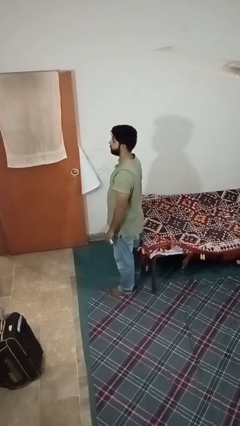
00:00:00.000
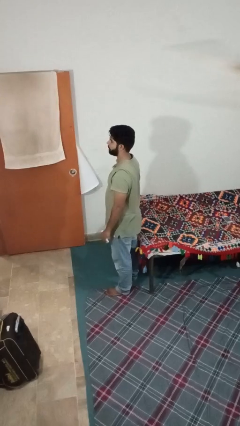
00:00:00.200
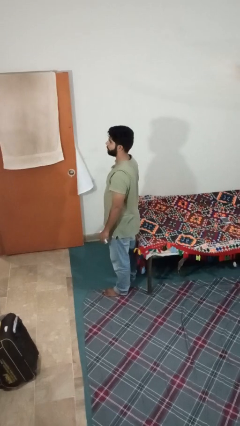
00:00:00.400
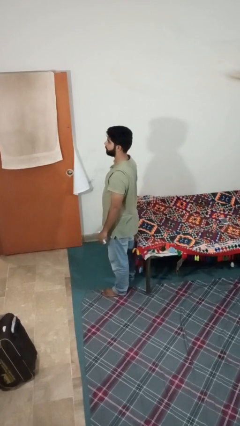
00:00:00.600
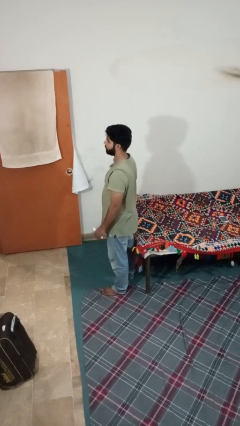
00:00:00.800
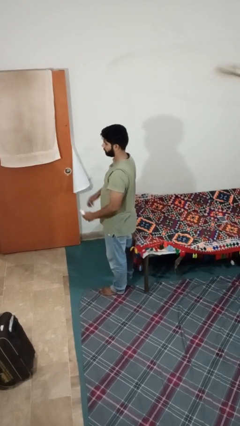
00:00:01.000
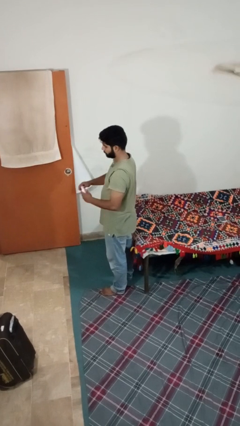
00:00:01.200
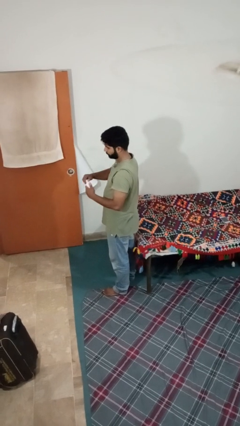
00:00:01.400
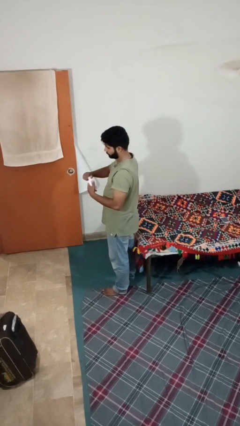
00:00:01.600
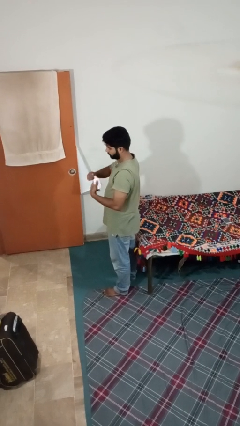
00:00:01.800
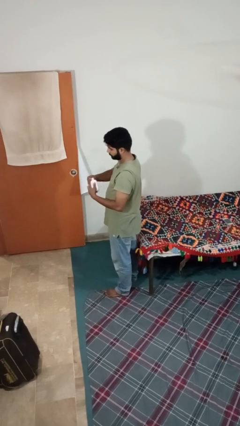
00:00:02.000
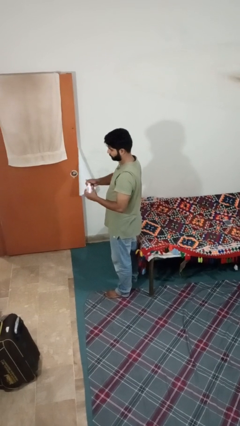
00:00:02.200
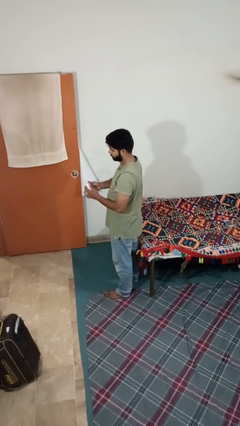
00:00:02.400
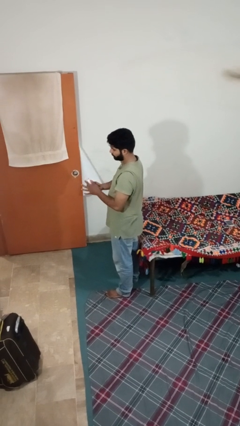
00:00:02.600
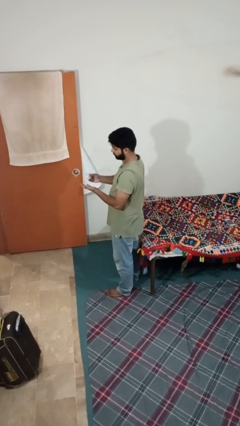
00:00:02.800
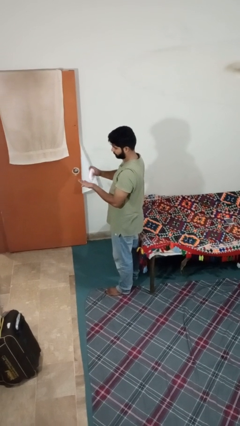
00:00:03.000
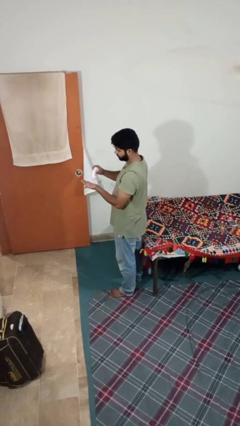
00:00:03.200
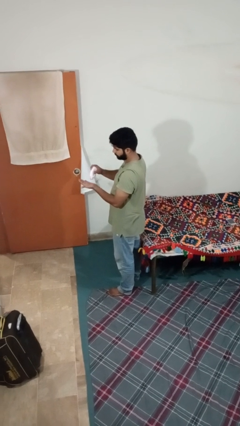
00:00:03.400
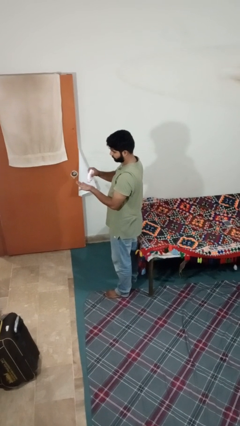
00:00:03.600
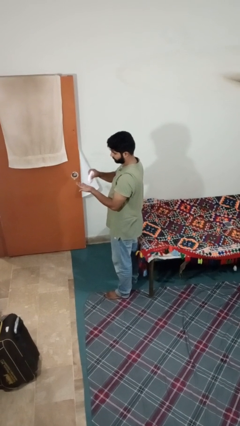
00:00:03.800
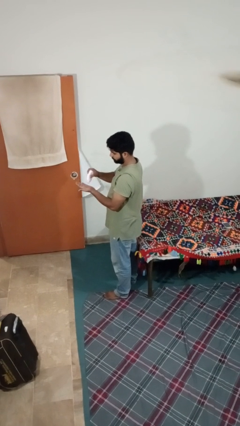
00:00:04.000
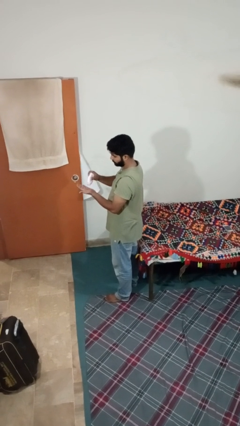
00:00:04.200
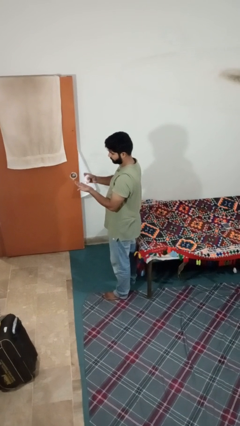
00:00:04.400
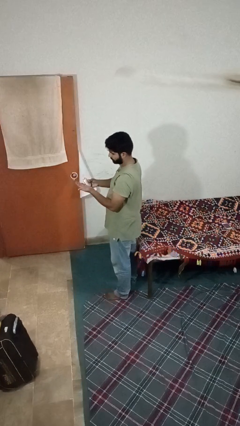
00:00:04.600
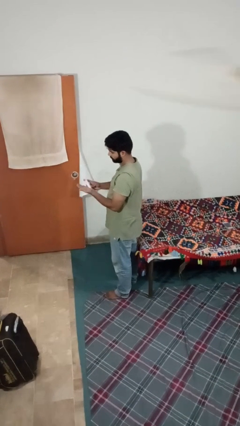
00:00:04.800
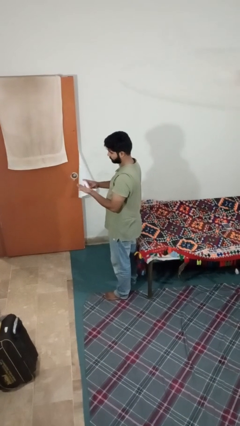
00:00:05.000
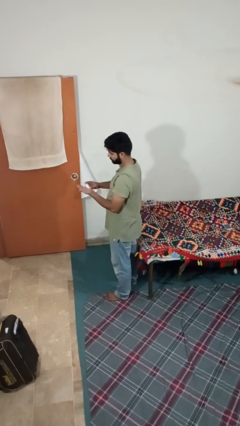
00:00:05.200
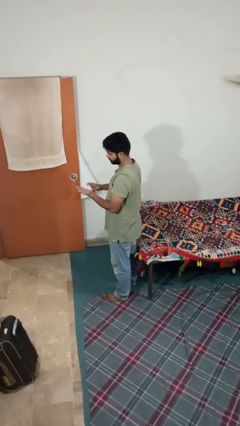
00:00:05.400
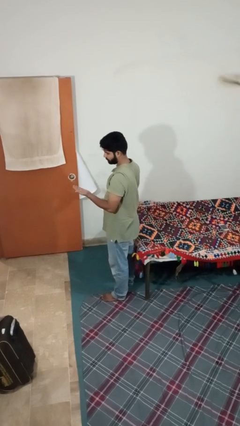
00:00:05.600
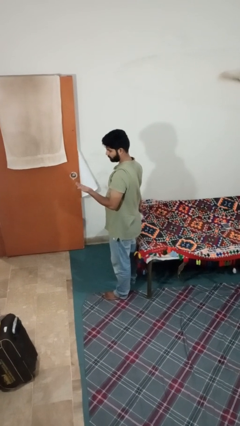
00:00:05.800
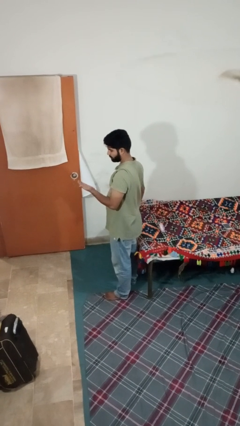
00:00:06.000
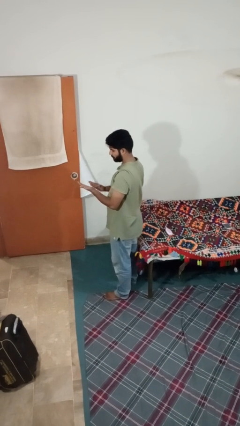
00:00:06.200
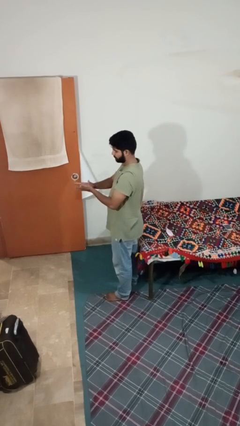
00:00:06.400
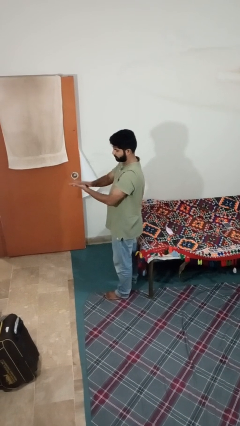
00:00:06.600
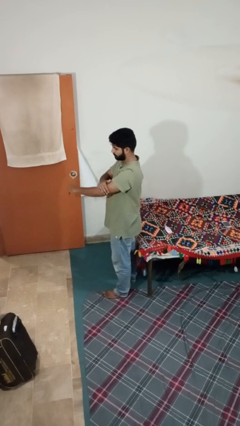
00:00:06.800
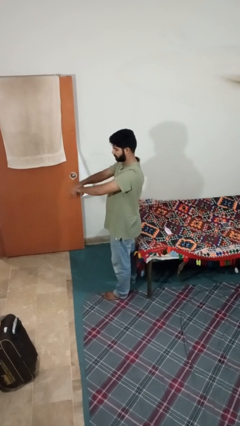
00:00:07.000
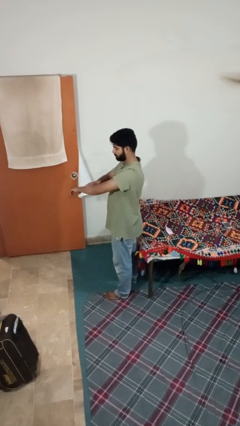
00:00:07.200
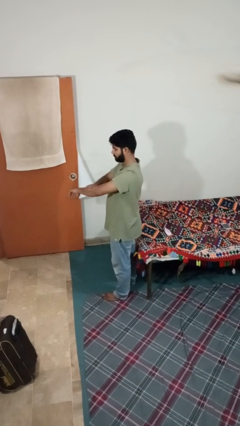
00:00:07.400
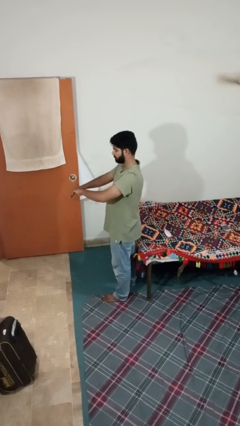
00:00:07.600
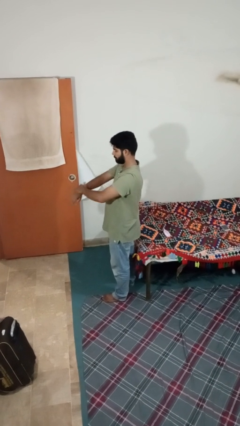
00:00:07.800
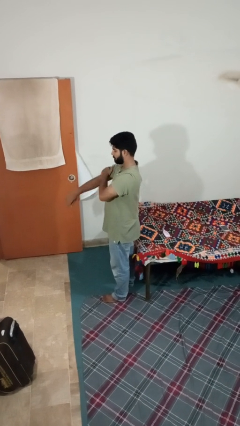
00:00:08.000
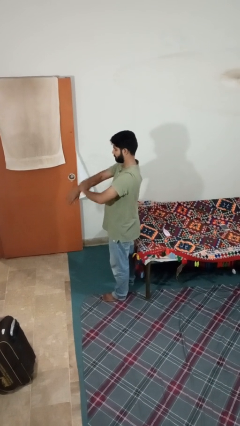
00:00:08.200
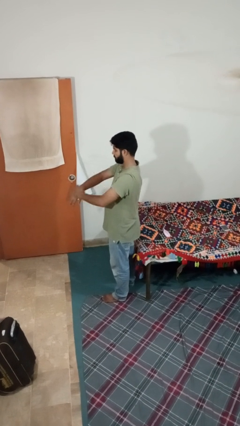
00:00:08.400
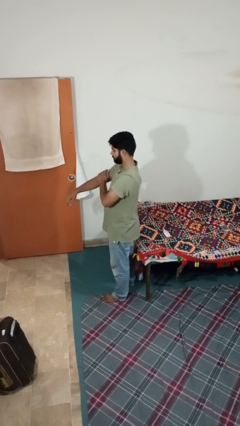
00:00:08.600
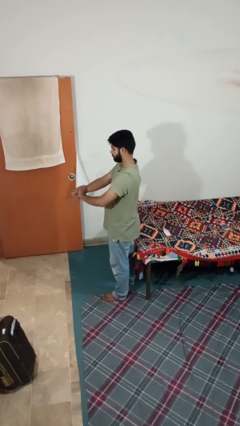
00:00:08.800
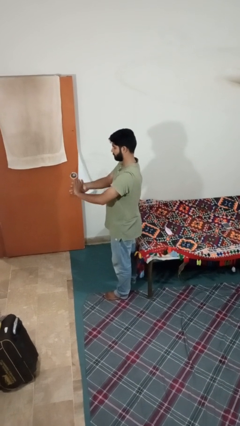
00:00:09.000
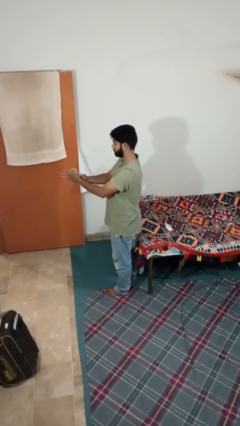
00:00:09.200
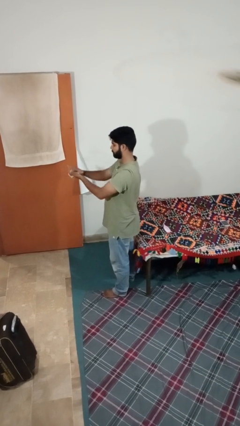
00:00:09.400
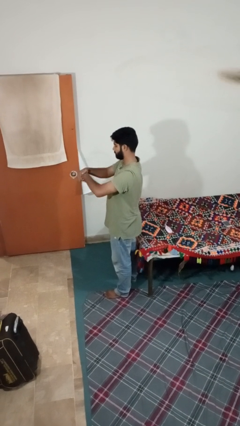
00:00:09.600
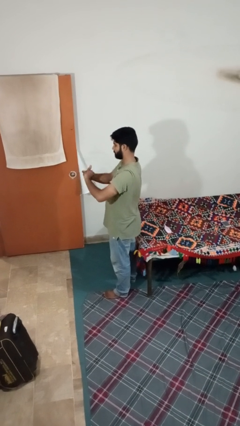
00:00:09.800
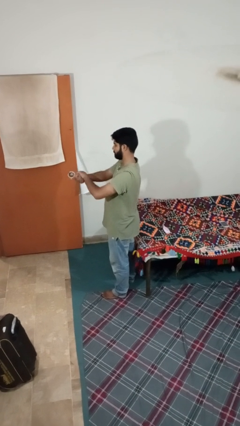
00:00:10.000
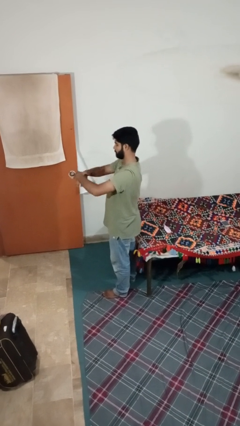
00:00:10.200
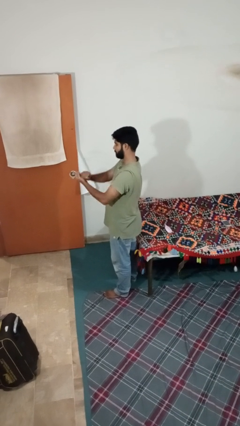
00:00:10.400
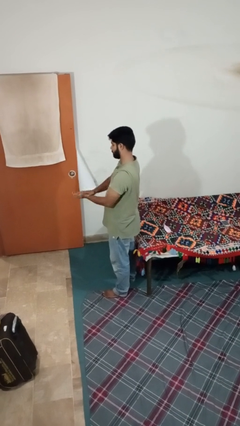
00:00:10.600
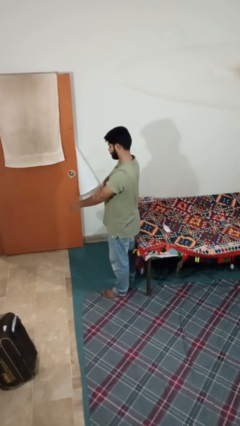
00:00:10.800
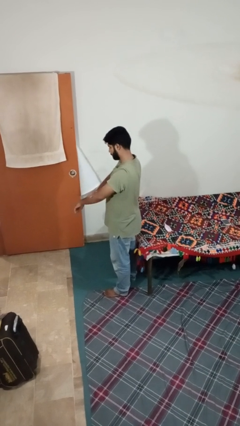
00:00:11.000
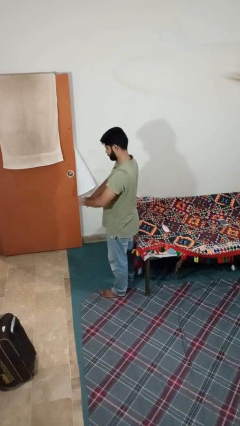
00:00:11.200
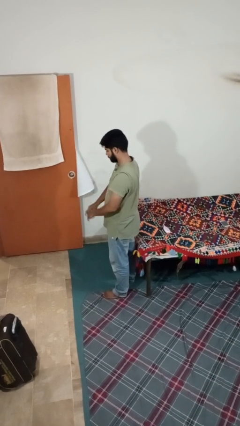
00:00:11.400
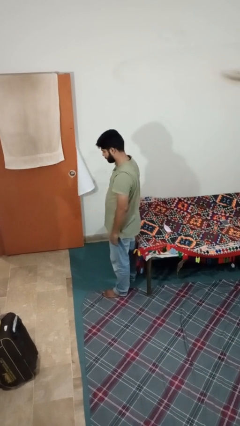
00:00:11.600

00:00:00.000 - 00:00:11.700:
person applies sunscreen

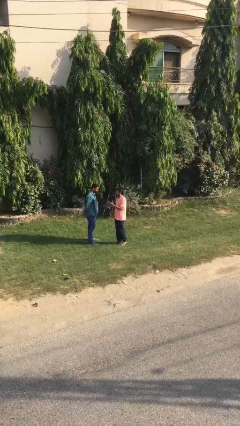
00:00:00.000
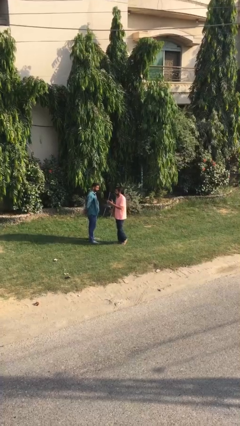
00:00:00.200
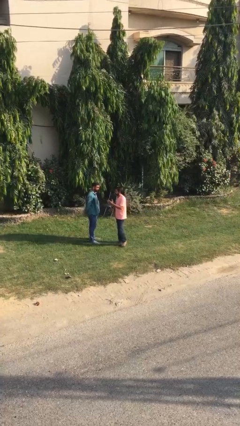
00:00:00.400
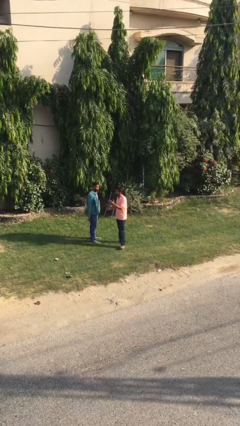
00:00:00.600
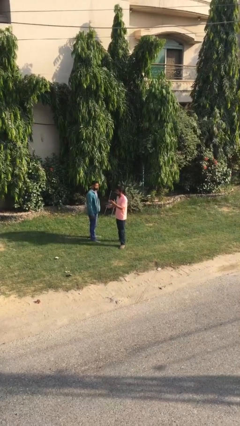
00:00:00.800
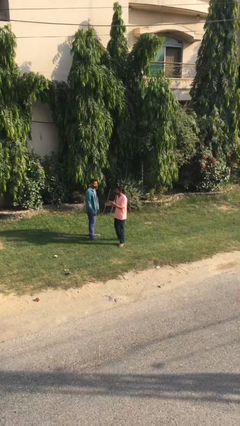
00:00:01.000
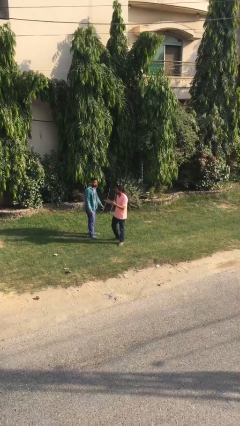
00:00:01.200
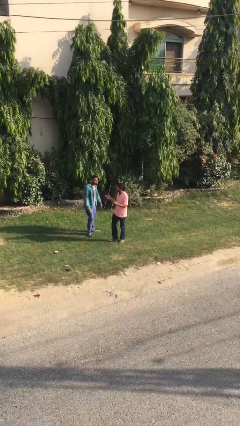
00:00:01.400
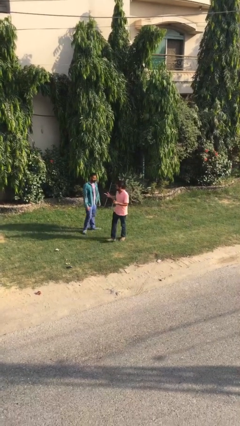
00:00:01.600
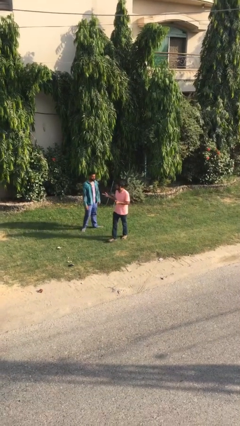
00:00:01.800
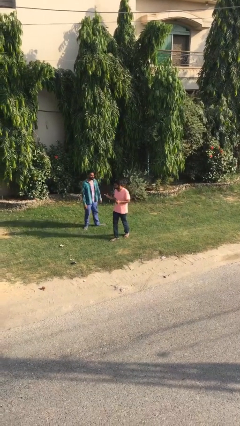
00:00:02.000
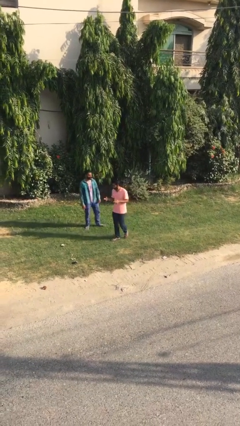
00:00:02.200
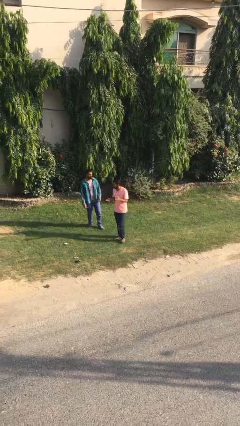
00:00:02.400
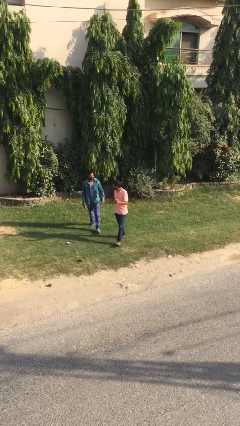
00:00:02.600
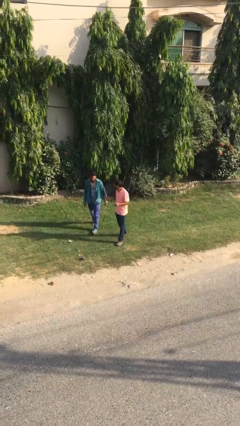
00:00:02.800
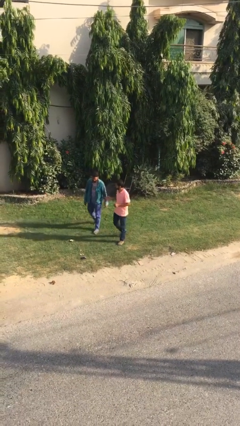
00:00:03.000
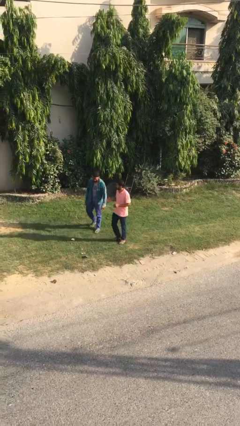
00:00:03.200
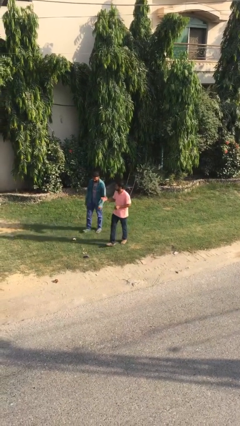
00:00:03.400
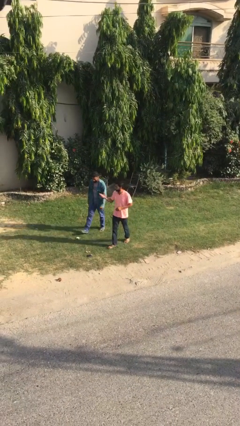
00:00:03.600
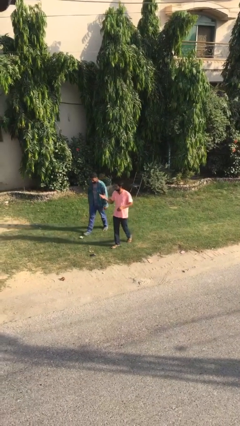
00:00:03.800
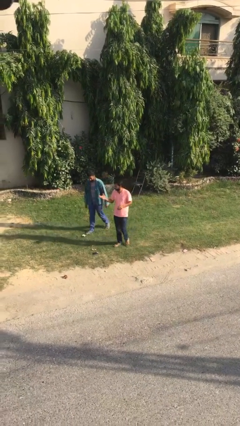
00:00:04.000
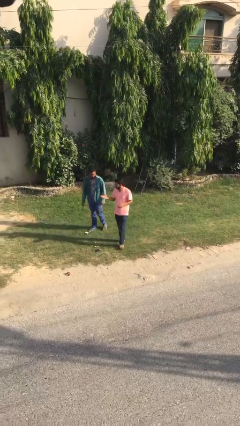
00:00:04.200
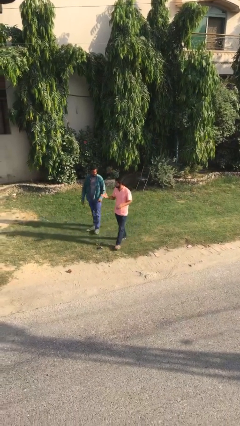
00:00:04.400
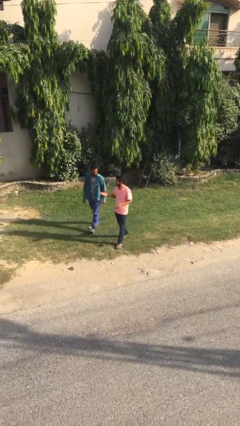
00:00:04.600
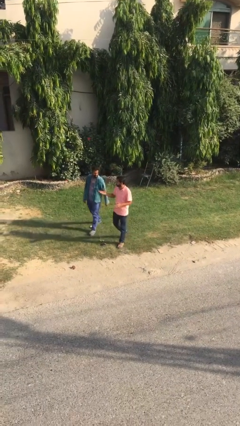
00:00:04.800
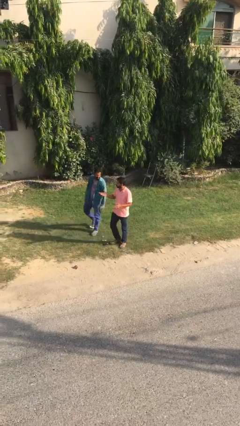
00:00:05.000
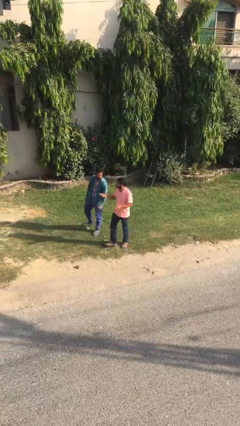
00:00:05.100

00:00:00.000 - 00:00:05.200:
person talks to person

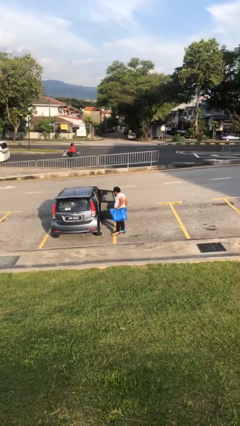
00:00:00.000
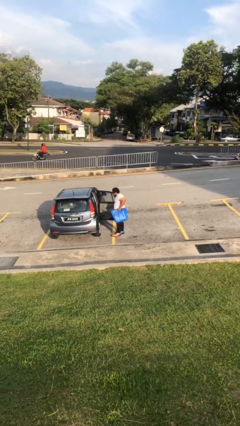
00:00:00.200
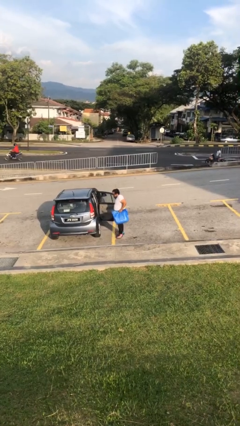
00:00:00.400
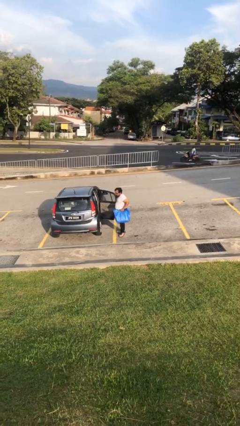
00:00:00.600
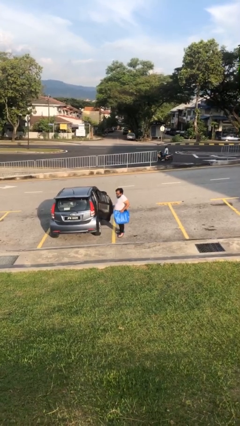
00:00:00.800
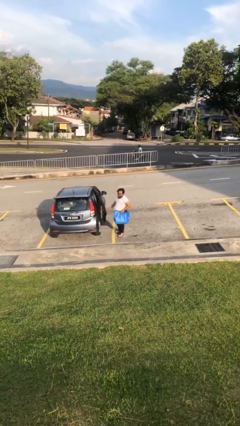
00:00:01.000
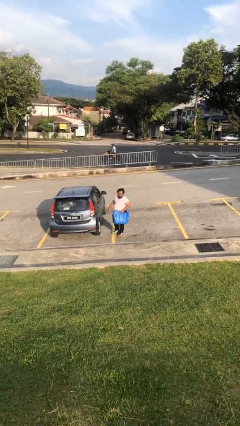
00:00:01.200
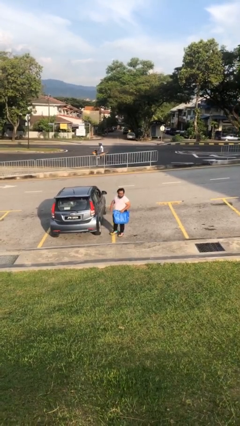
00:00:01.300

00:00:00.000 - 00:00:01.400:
person closes car door
